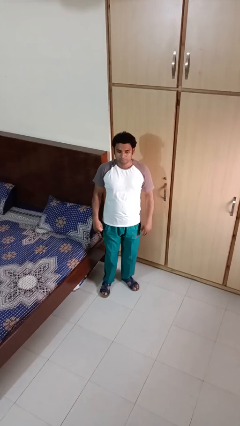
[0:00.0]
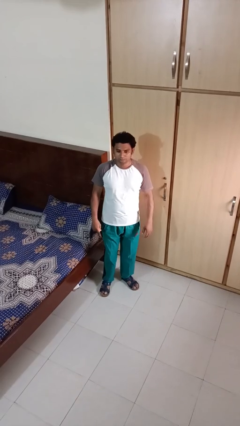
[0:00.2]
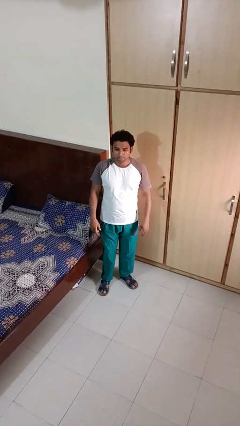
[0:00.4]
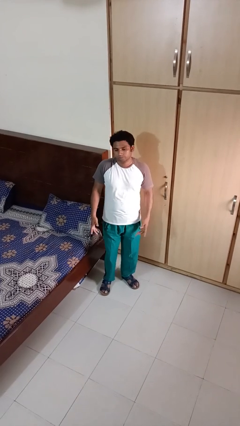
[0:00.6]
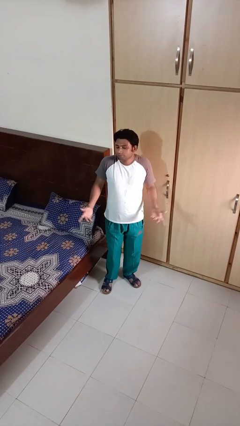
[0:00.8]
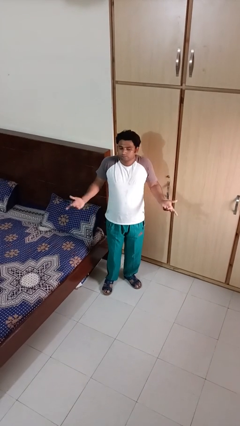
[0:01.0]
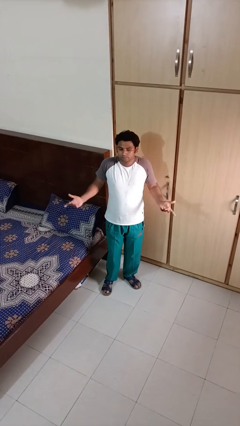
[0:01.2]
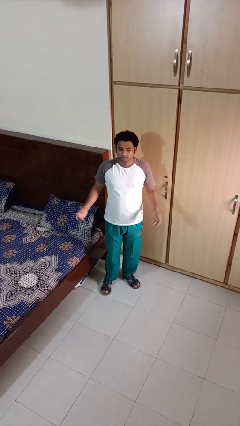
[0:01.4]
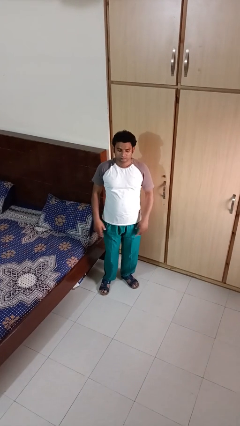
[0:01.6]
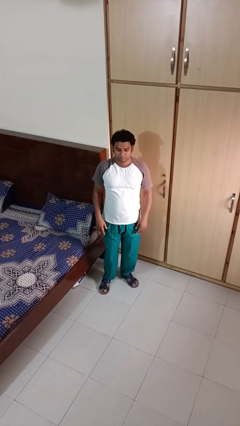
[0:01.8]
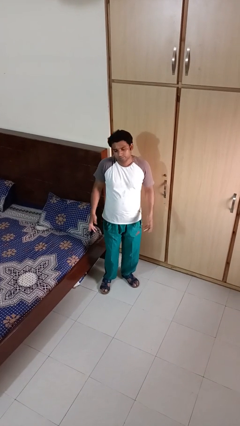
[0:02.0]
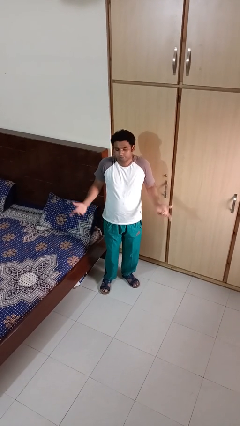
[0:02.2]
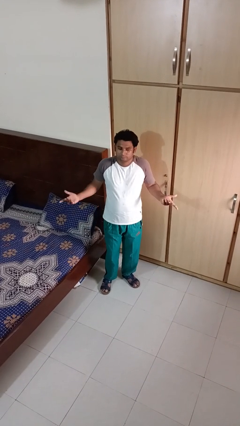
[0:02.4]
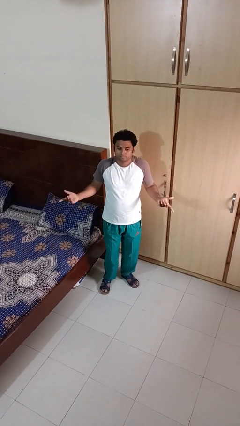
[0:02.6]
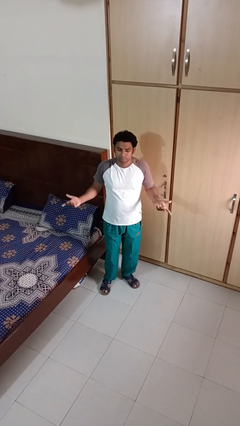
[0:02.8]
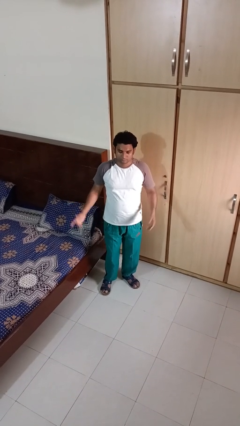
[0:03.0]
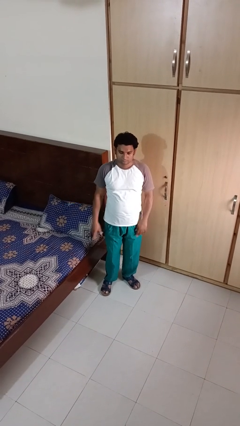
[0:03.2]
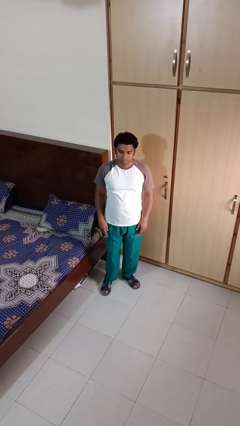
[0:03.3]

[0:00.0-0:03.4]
person shrugs

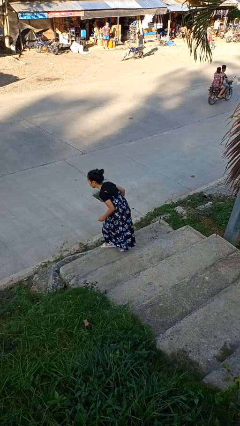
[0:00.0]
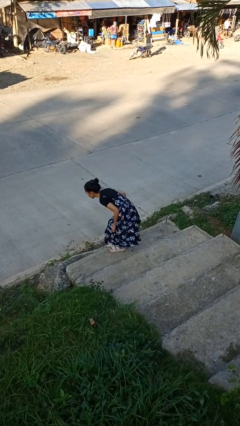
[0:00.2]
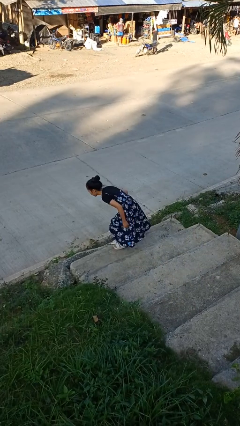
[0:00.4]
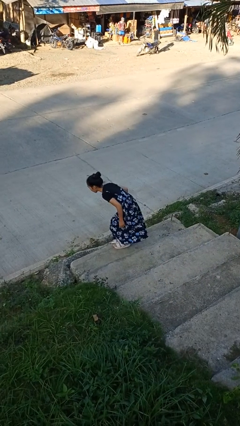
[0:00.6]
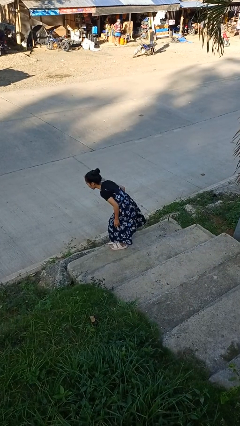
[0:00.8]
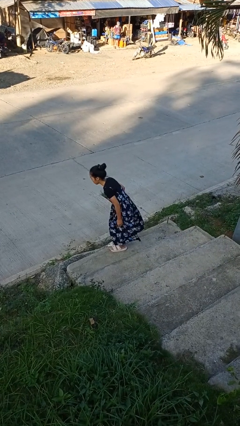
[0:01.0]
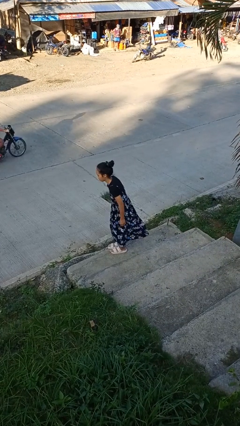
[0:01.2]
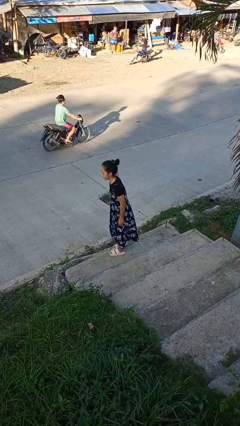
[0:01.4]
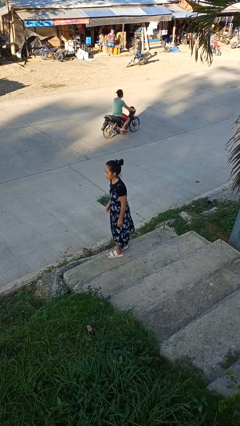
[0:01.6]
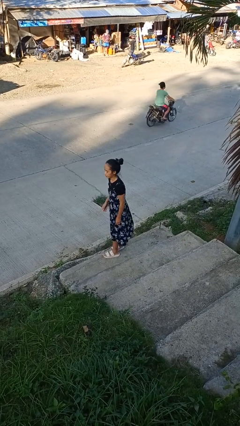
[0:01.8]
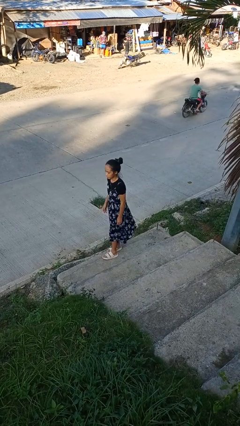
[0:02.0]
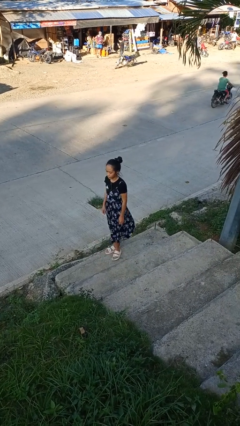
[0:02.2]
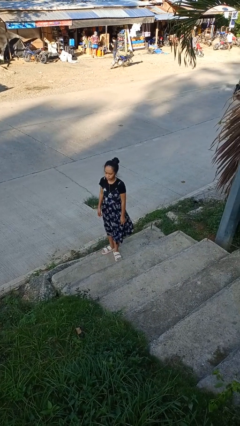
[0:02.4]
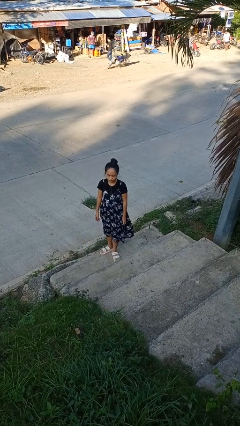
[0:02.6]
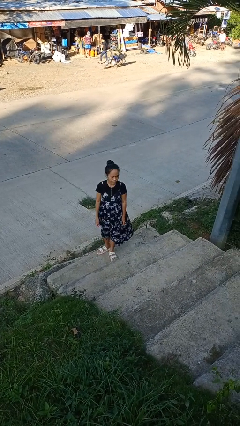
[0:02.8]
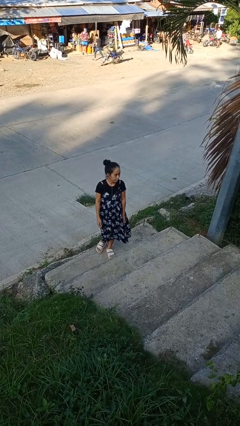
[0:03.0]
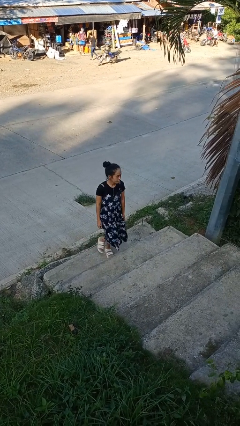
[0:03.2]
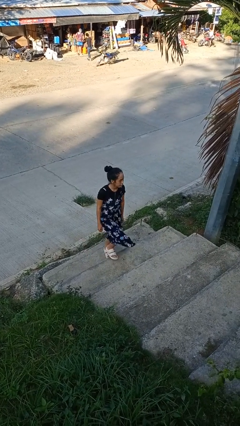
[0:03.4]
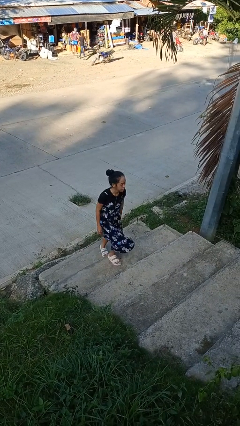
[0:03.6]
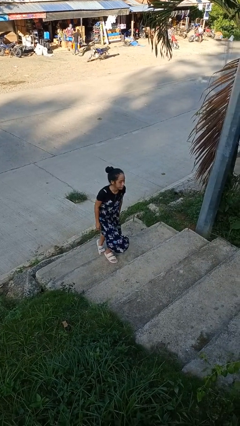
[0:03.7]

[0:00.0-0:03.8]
person trips on stair

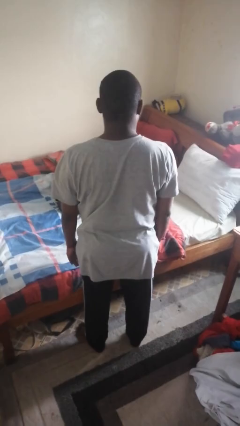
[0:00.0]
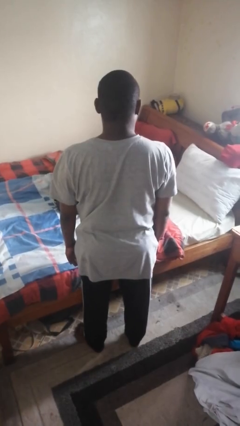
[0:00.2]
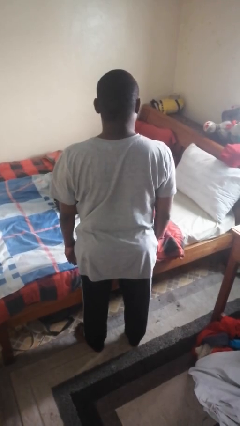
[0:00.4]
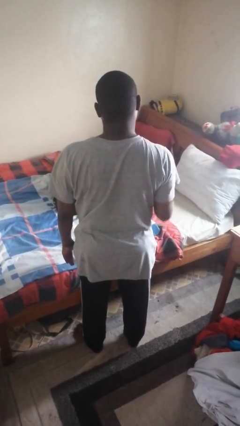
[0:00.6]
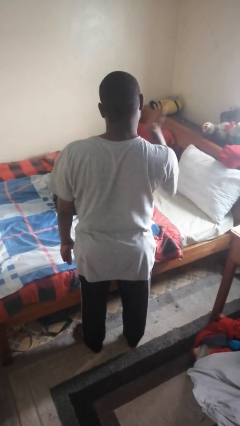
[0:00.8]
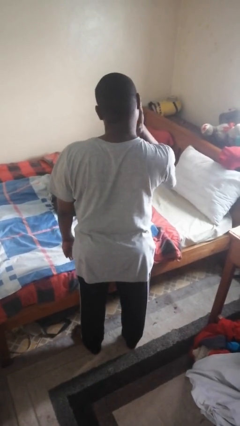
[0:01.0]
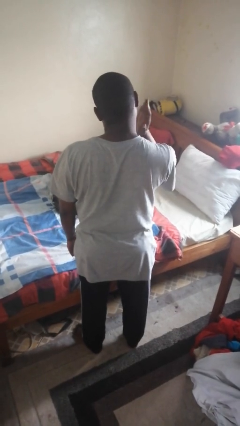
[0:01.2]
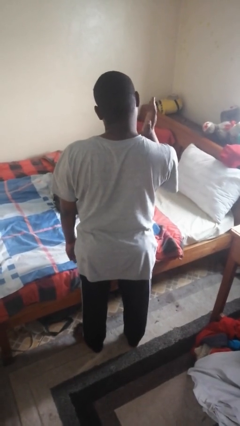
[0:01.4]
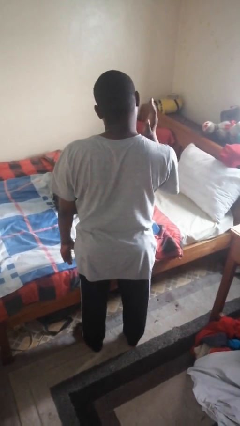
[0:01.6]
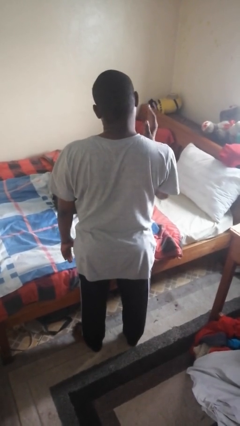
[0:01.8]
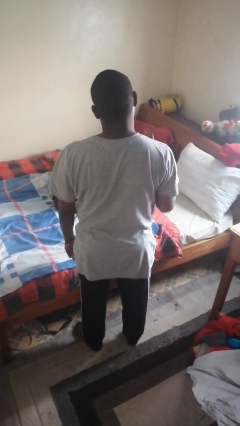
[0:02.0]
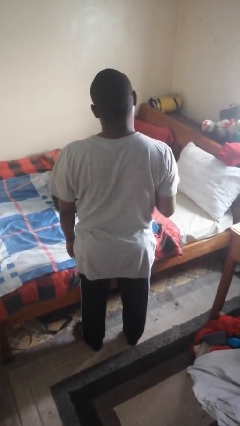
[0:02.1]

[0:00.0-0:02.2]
person swats bug

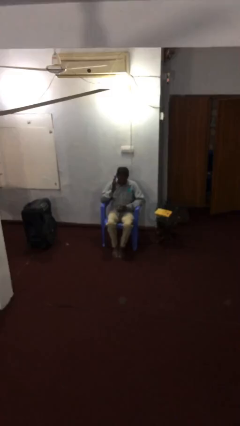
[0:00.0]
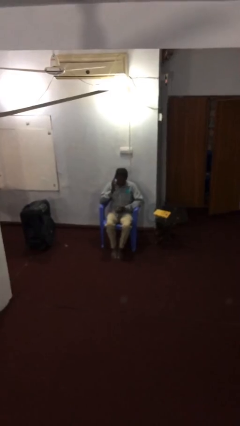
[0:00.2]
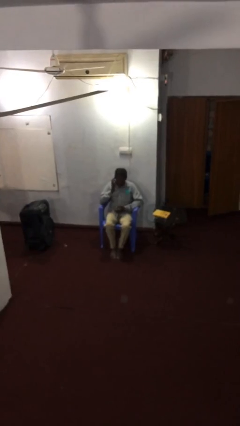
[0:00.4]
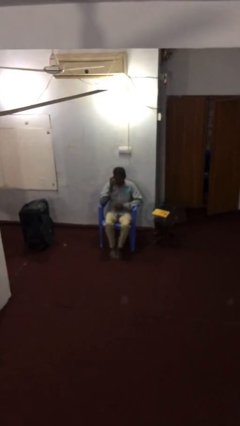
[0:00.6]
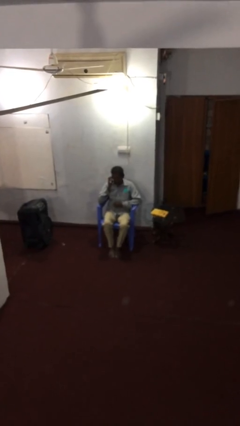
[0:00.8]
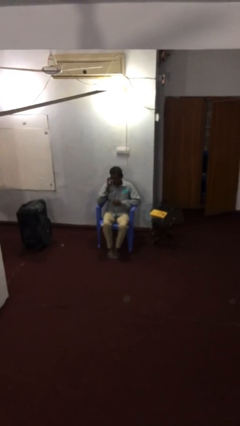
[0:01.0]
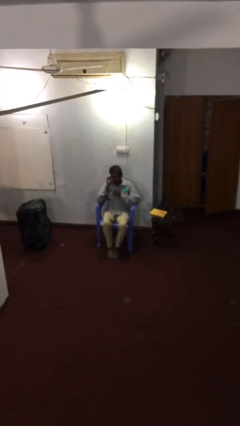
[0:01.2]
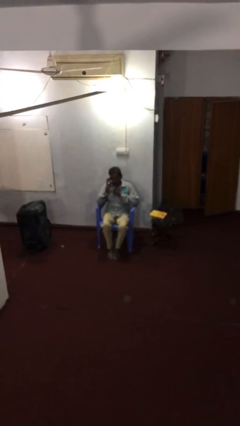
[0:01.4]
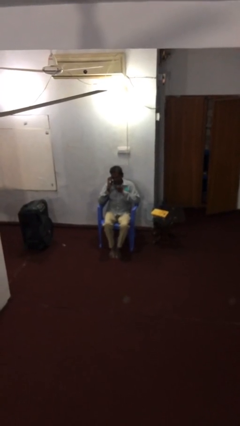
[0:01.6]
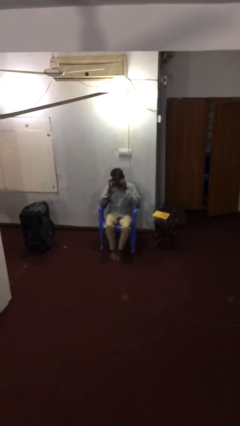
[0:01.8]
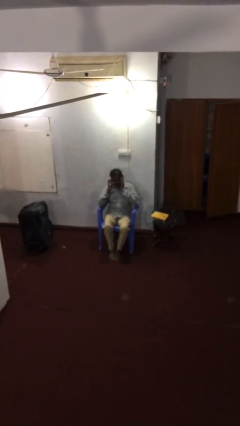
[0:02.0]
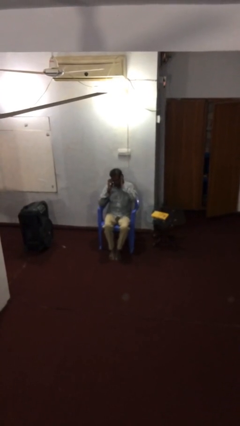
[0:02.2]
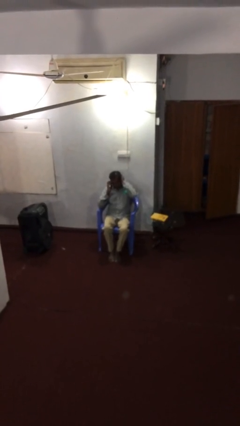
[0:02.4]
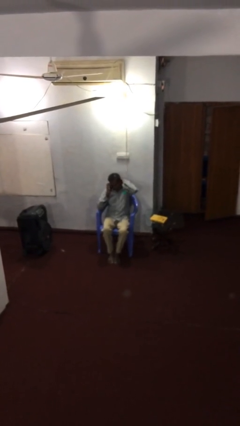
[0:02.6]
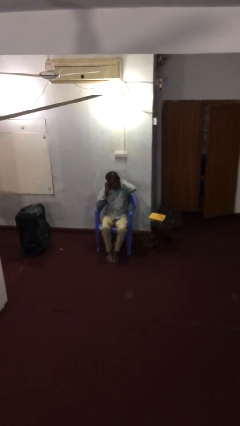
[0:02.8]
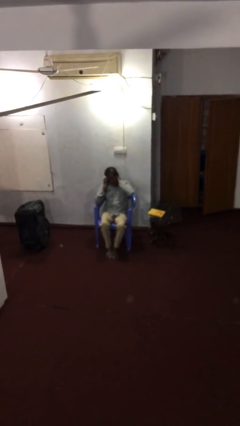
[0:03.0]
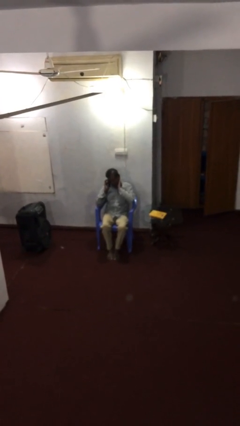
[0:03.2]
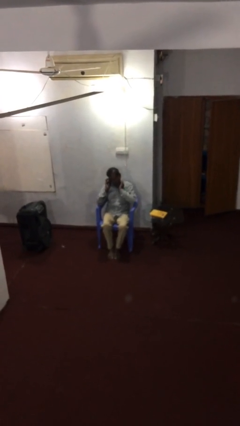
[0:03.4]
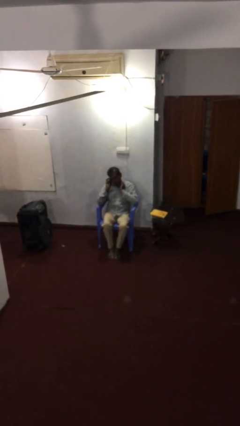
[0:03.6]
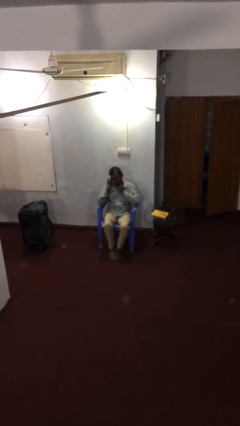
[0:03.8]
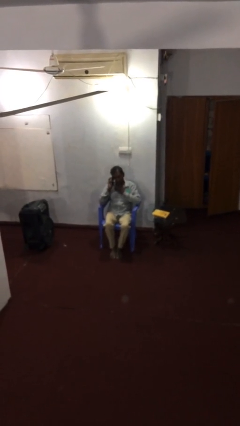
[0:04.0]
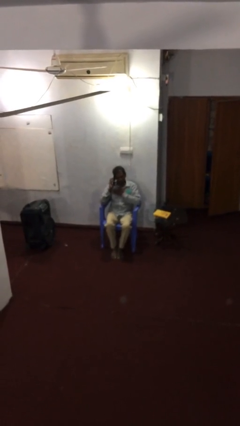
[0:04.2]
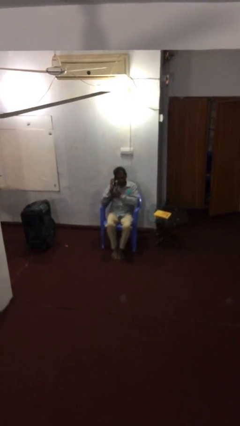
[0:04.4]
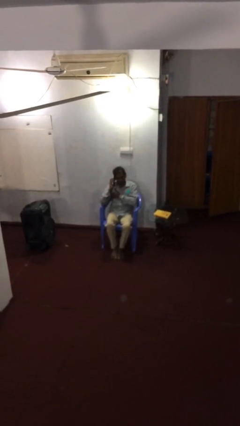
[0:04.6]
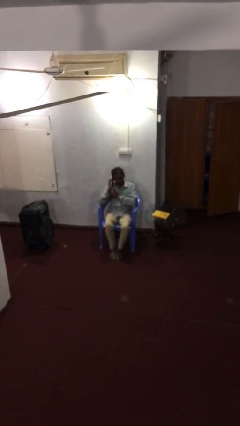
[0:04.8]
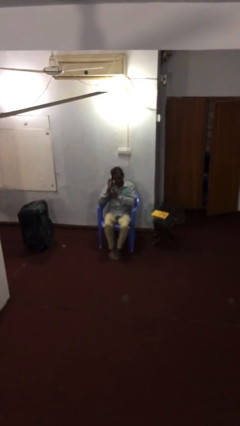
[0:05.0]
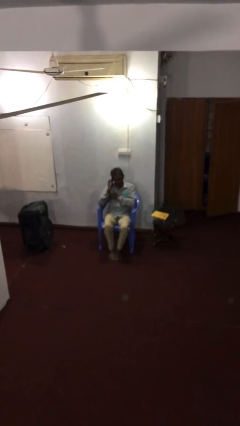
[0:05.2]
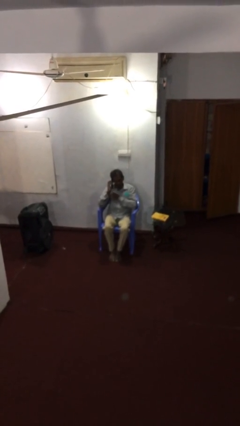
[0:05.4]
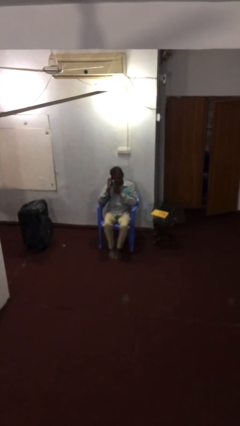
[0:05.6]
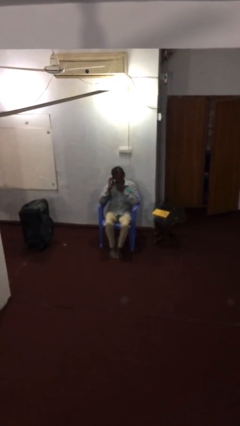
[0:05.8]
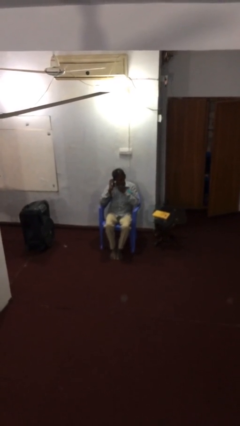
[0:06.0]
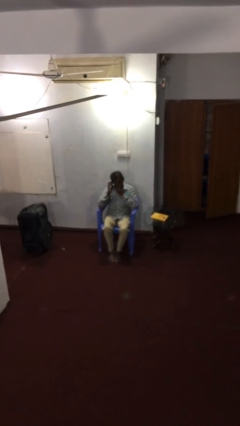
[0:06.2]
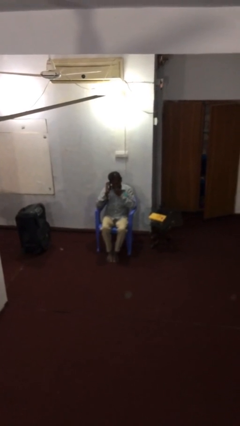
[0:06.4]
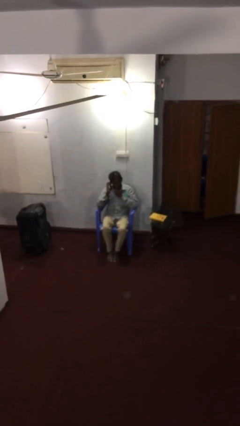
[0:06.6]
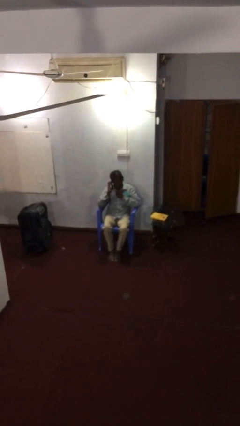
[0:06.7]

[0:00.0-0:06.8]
person talks on phone

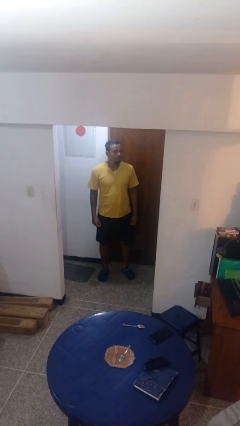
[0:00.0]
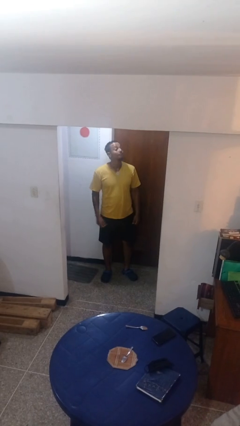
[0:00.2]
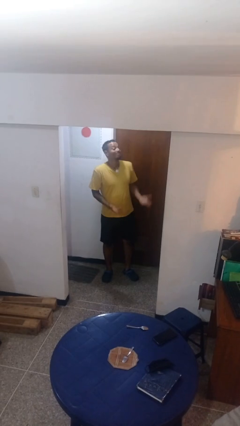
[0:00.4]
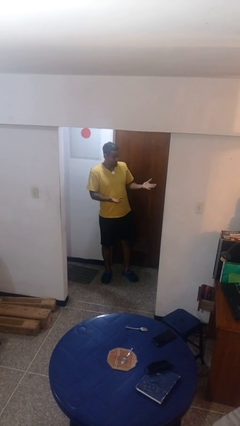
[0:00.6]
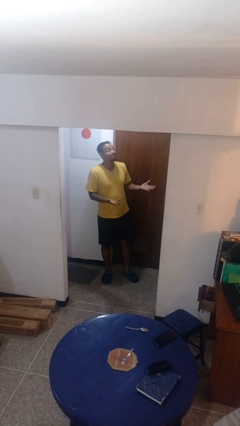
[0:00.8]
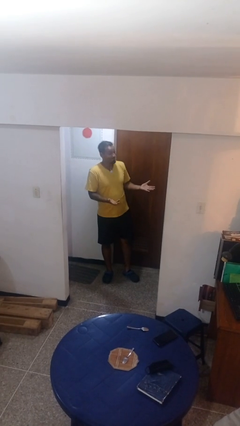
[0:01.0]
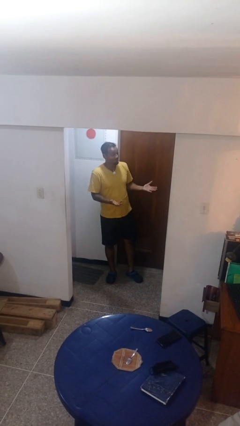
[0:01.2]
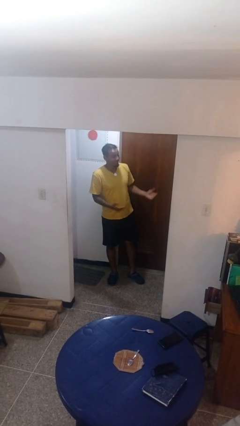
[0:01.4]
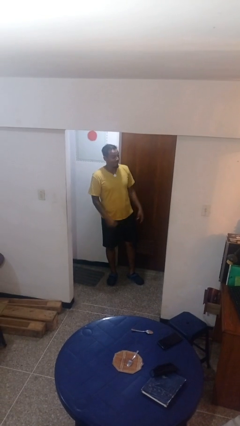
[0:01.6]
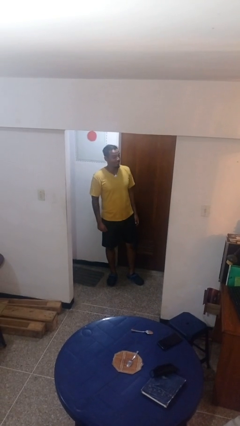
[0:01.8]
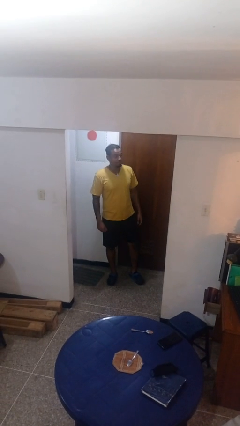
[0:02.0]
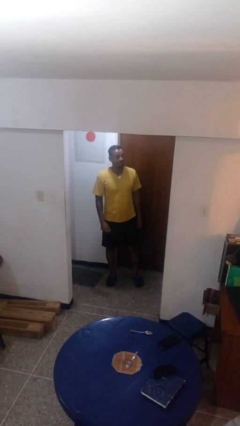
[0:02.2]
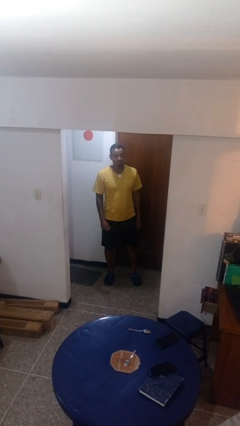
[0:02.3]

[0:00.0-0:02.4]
person nods head
